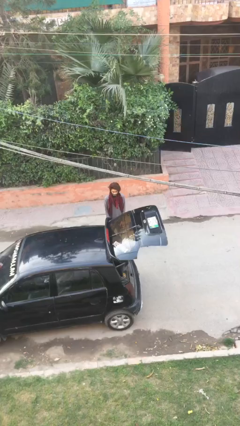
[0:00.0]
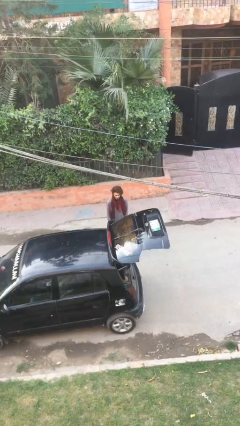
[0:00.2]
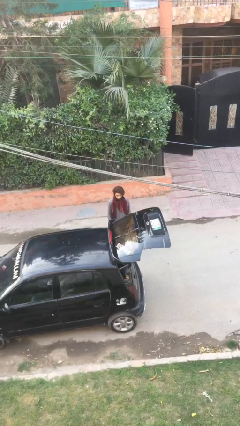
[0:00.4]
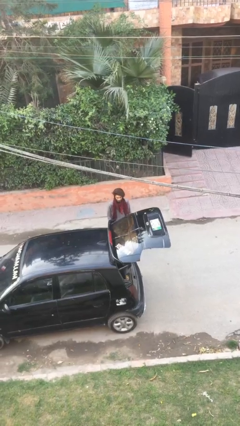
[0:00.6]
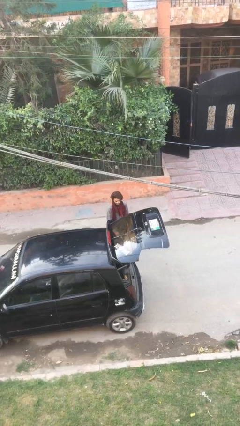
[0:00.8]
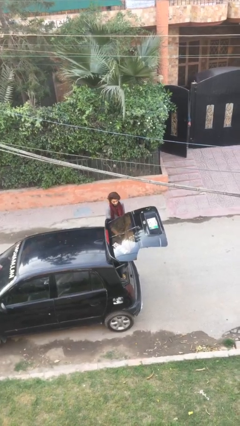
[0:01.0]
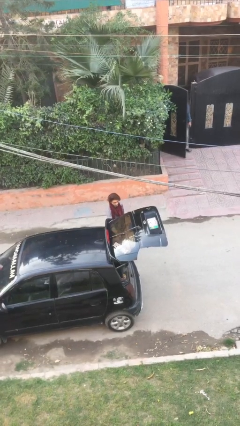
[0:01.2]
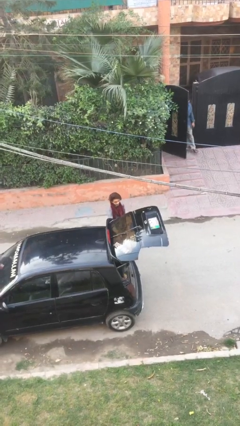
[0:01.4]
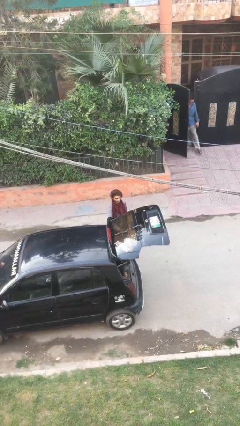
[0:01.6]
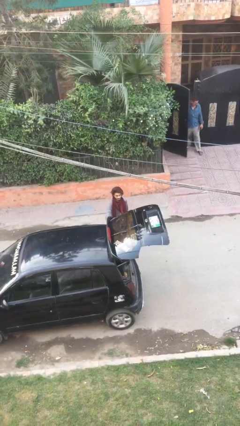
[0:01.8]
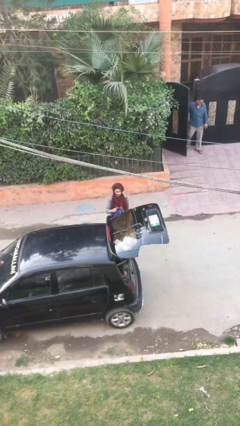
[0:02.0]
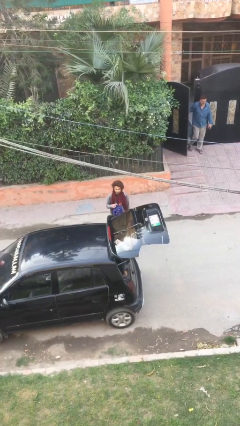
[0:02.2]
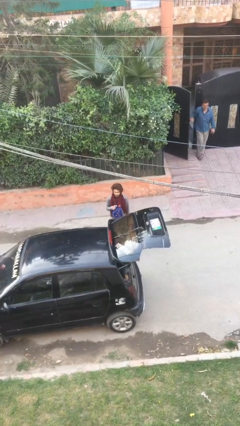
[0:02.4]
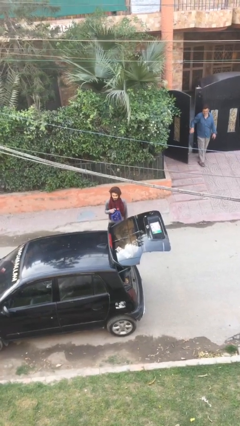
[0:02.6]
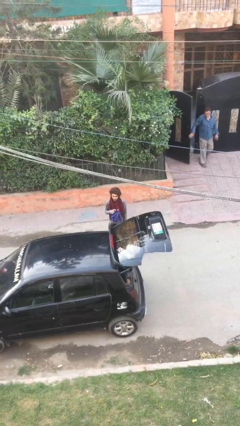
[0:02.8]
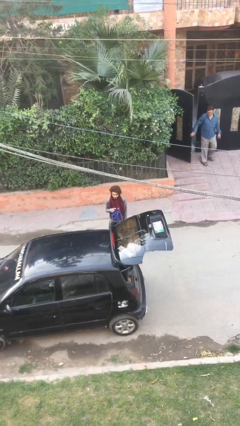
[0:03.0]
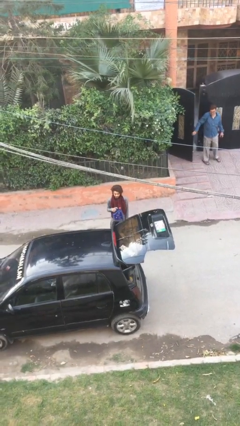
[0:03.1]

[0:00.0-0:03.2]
person unloads car

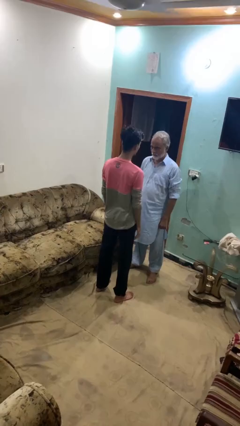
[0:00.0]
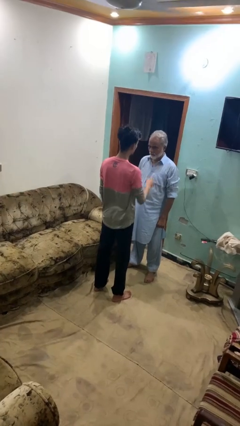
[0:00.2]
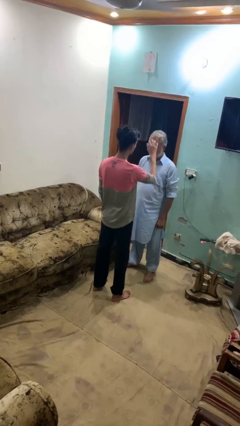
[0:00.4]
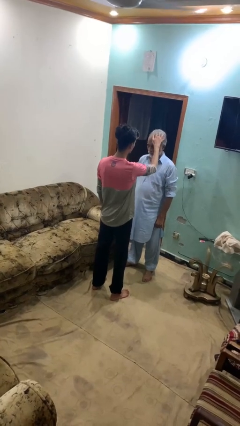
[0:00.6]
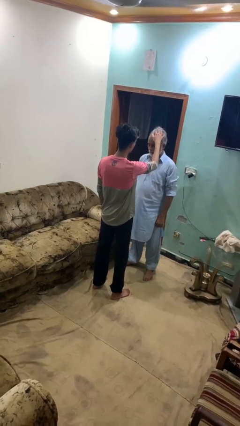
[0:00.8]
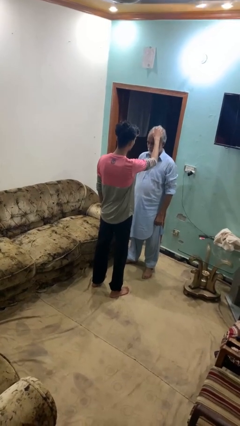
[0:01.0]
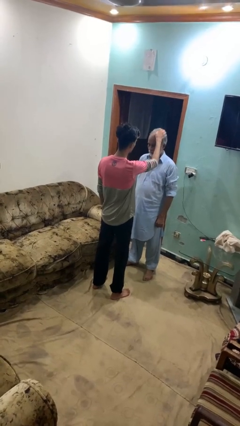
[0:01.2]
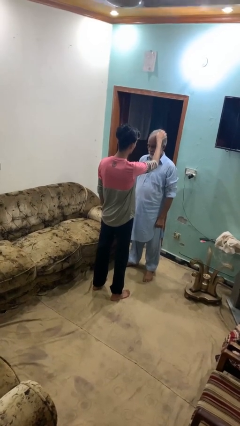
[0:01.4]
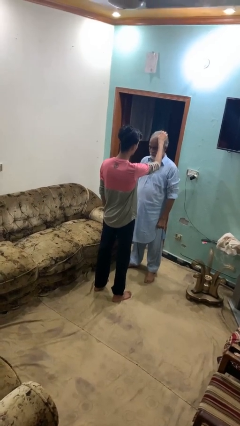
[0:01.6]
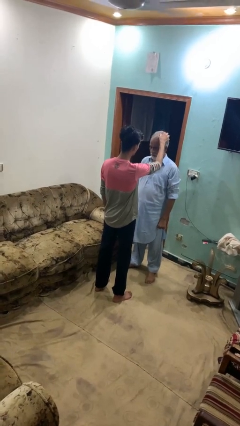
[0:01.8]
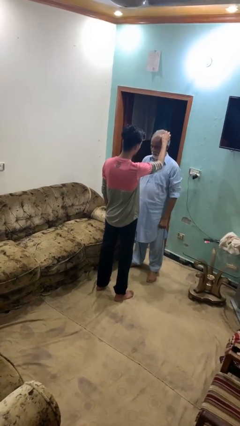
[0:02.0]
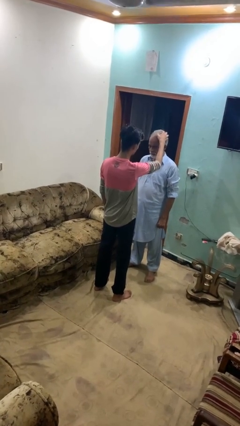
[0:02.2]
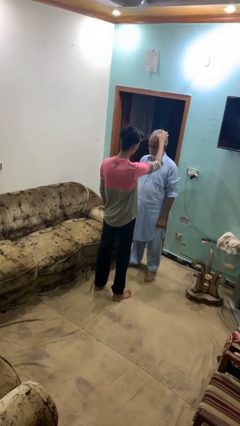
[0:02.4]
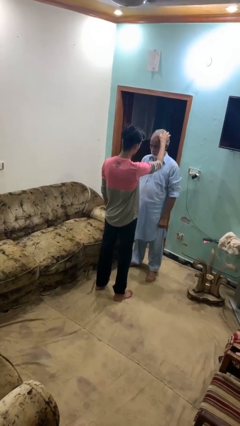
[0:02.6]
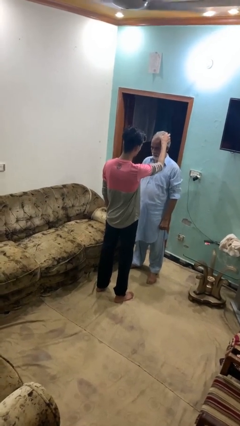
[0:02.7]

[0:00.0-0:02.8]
person grabs person by hair

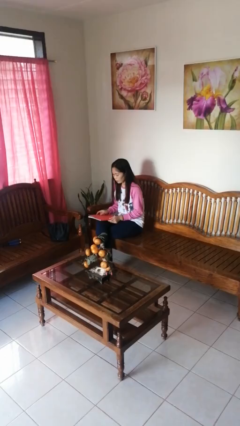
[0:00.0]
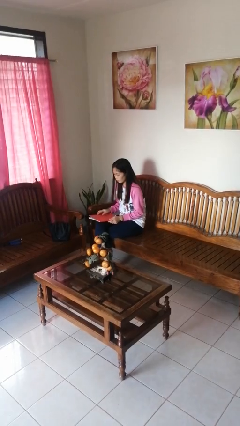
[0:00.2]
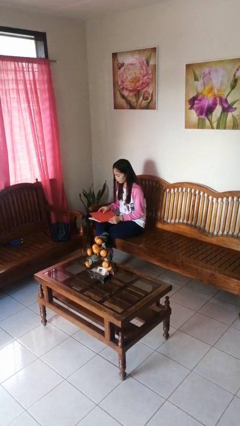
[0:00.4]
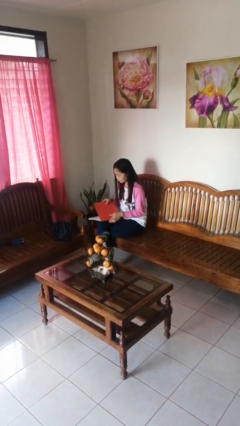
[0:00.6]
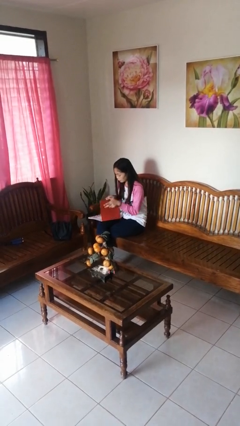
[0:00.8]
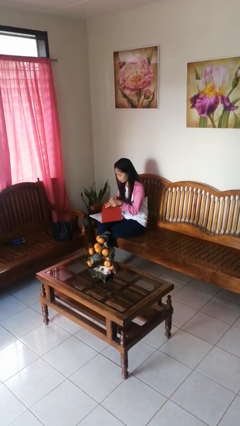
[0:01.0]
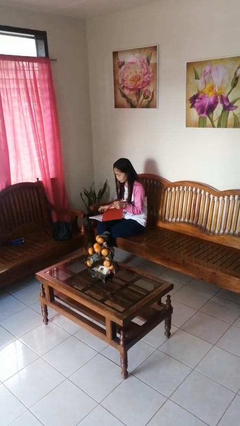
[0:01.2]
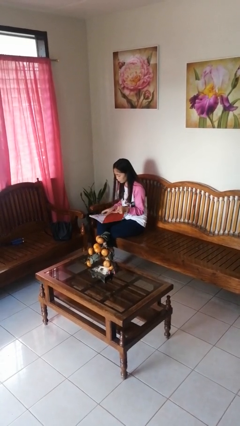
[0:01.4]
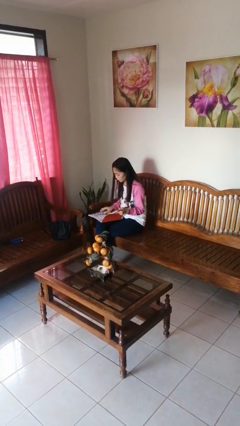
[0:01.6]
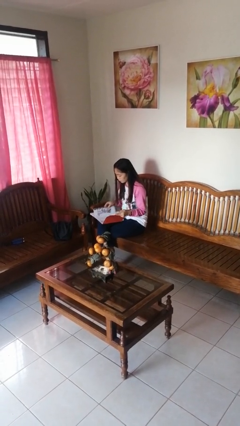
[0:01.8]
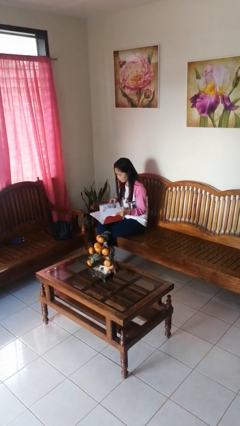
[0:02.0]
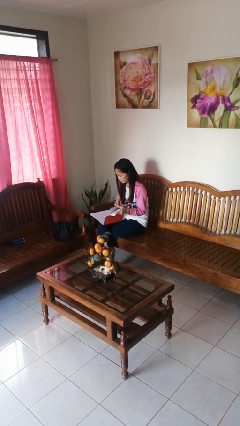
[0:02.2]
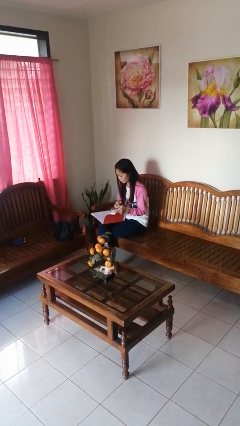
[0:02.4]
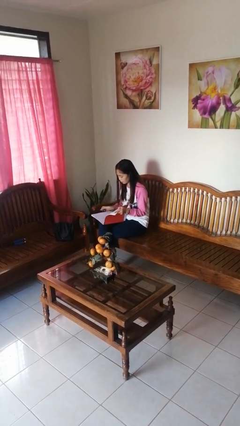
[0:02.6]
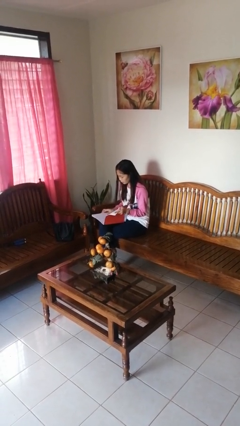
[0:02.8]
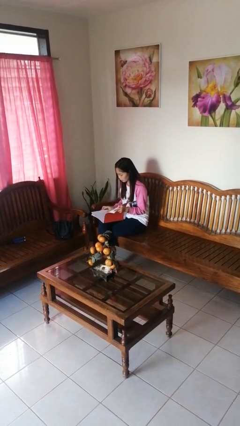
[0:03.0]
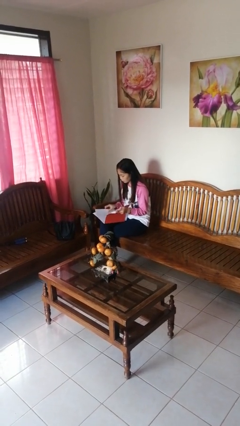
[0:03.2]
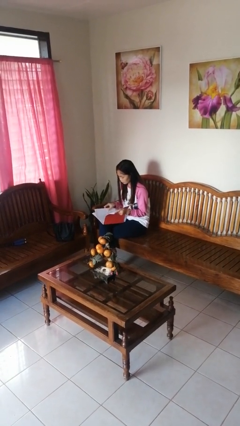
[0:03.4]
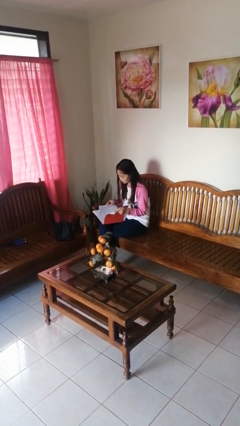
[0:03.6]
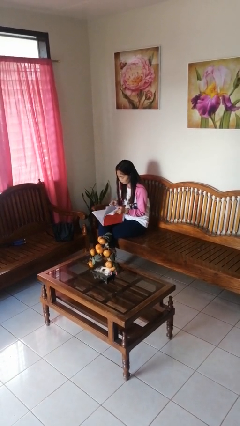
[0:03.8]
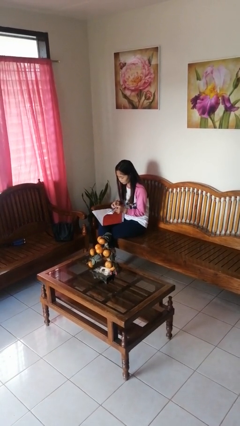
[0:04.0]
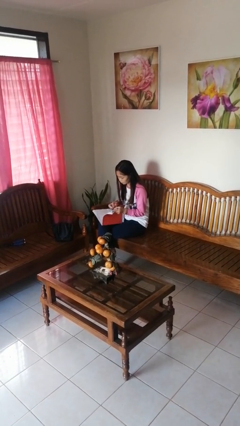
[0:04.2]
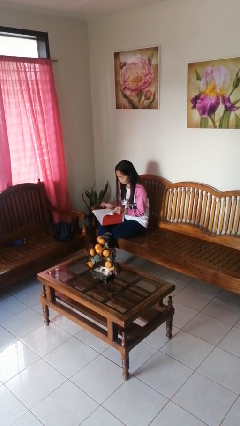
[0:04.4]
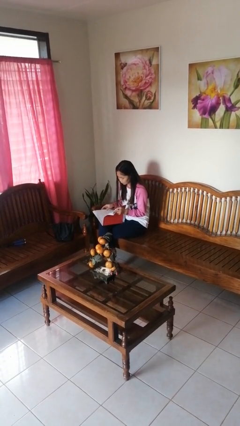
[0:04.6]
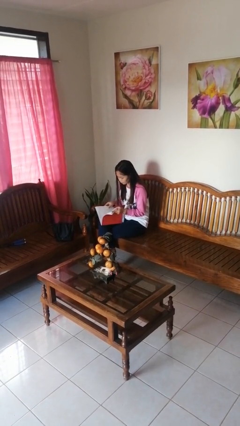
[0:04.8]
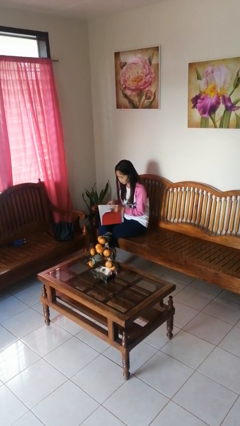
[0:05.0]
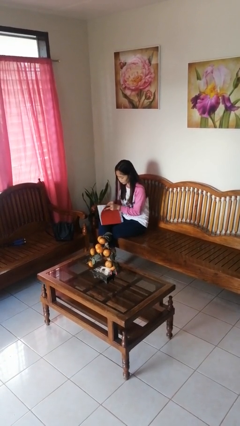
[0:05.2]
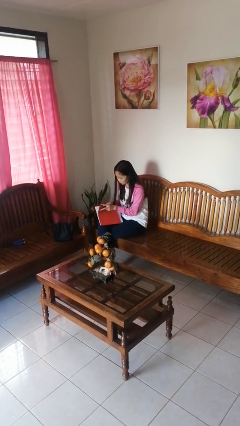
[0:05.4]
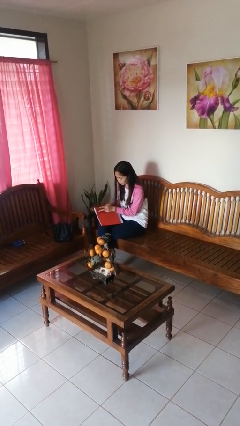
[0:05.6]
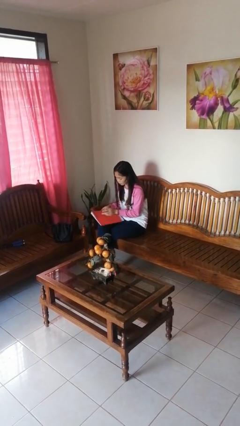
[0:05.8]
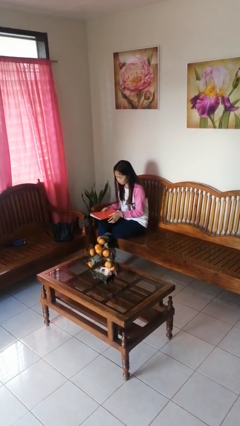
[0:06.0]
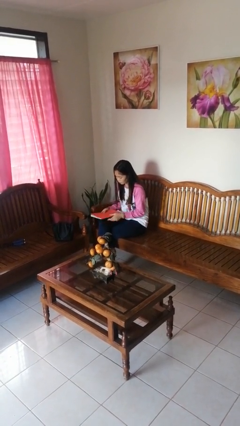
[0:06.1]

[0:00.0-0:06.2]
person reads magazine

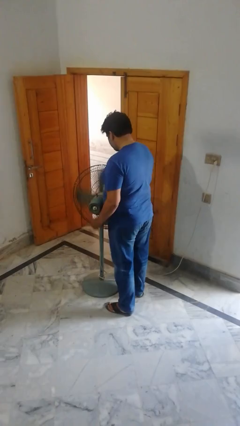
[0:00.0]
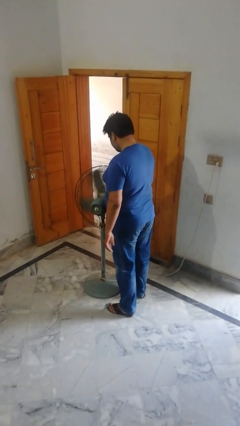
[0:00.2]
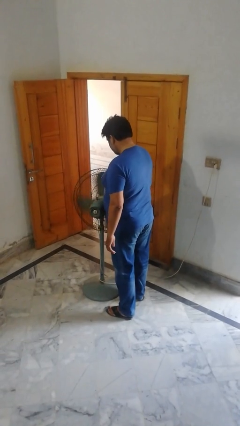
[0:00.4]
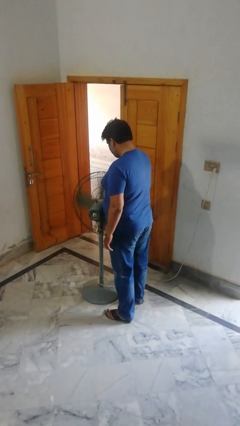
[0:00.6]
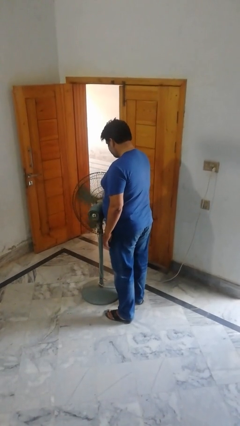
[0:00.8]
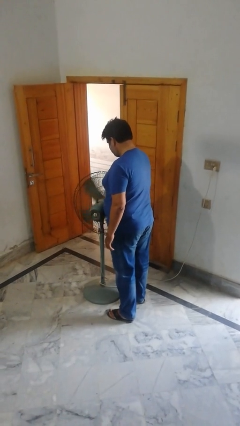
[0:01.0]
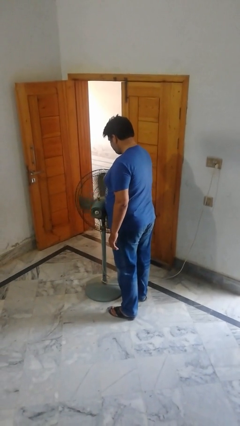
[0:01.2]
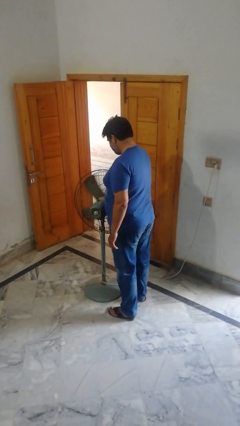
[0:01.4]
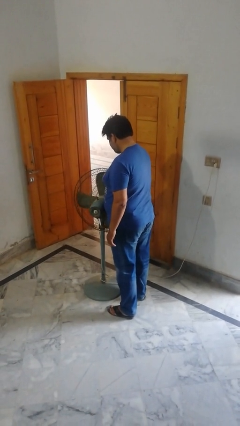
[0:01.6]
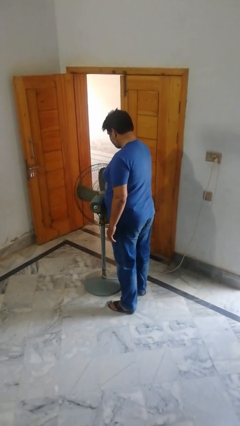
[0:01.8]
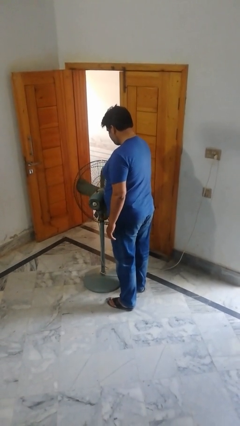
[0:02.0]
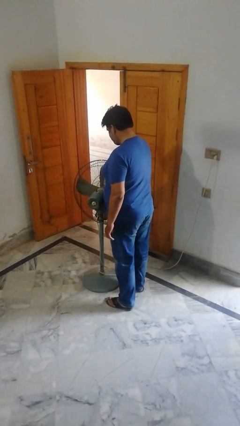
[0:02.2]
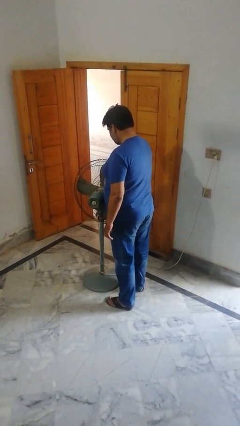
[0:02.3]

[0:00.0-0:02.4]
person turns off fan

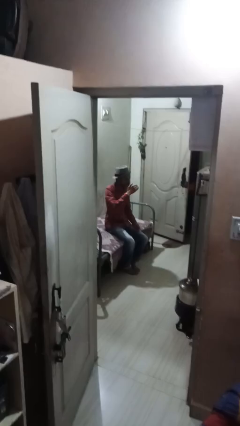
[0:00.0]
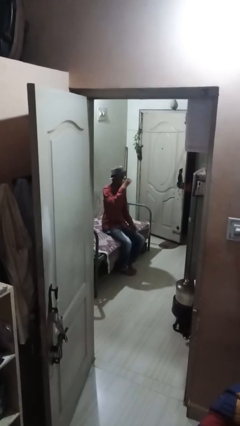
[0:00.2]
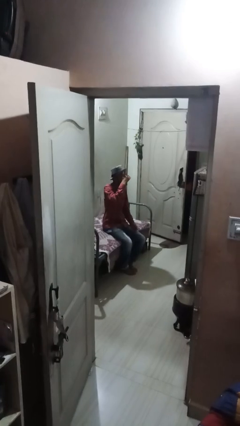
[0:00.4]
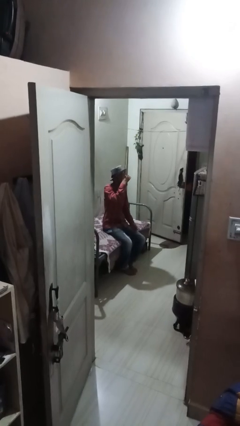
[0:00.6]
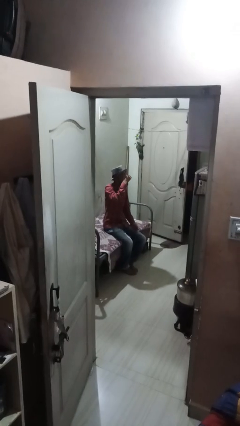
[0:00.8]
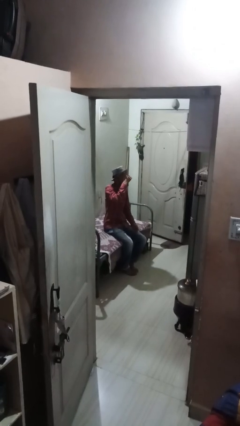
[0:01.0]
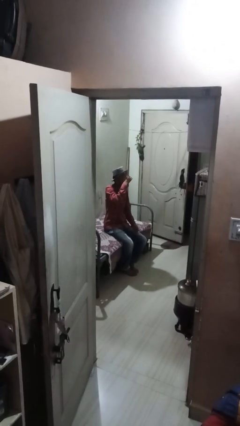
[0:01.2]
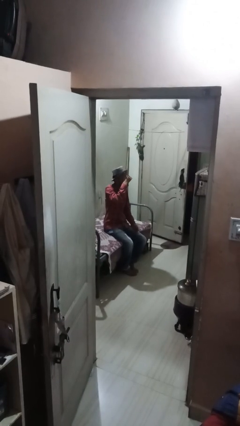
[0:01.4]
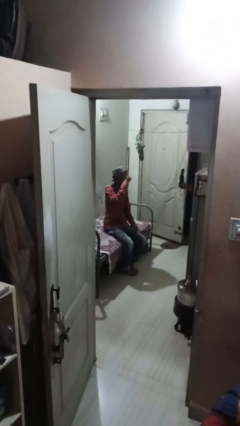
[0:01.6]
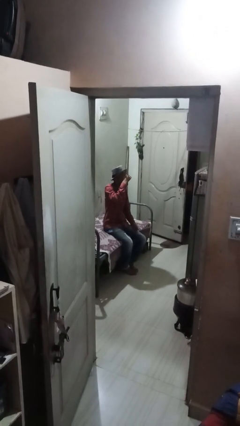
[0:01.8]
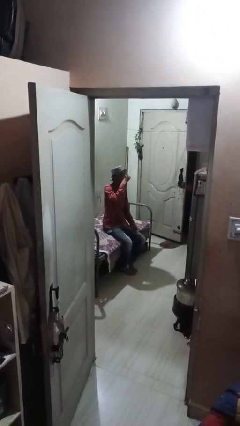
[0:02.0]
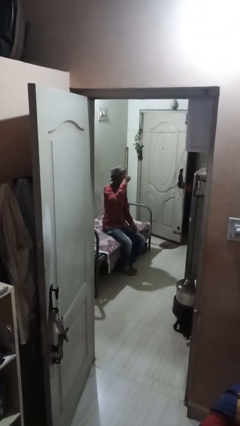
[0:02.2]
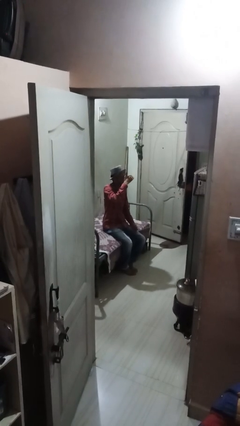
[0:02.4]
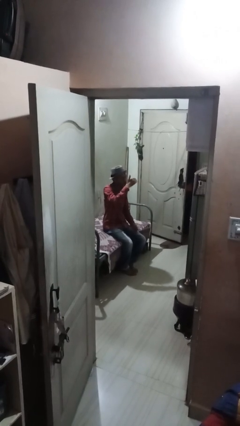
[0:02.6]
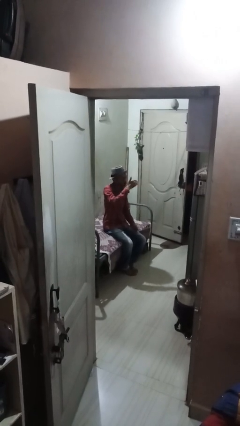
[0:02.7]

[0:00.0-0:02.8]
person shades eyes

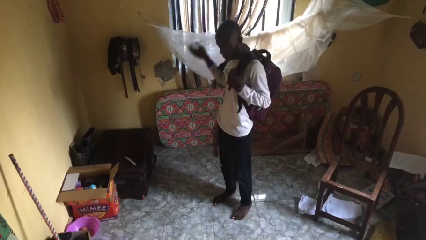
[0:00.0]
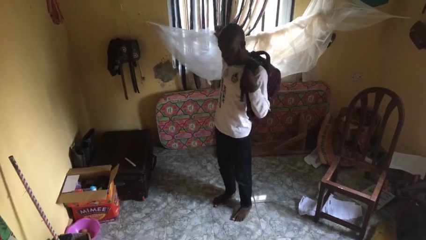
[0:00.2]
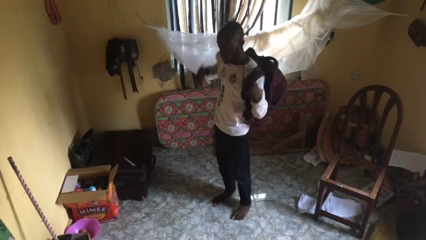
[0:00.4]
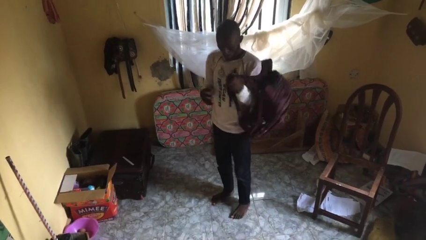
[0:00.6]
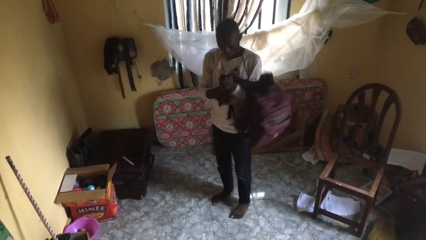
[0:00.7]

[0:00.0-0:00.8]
person takes off backpack
